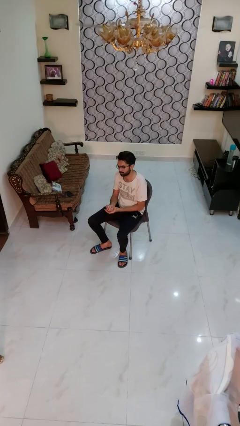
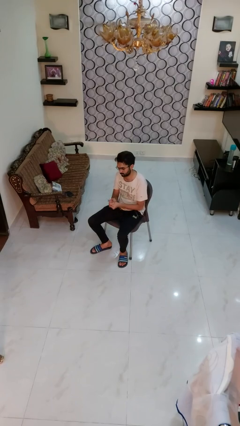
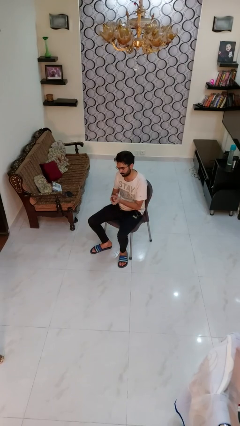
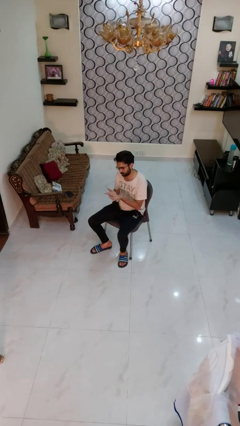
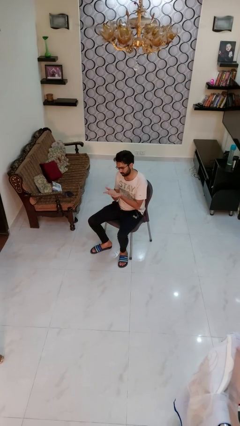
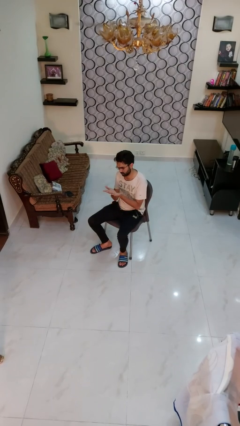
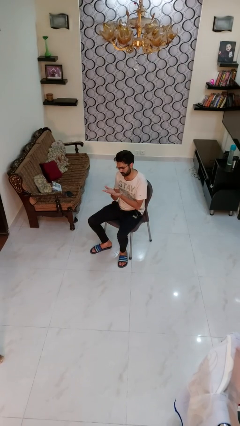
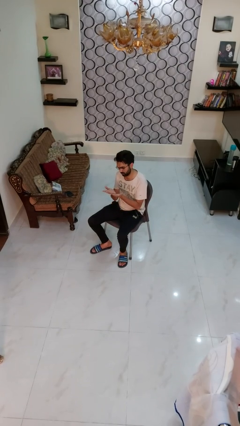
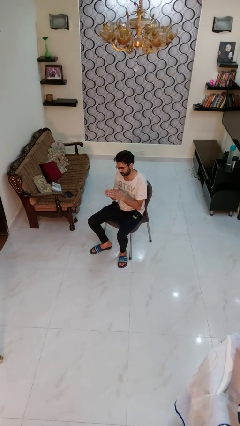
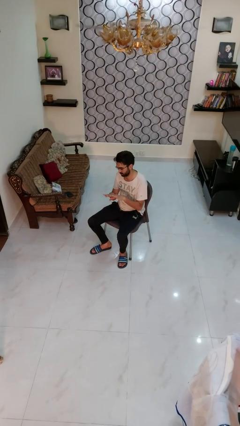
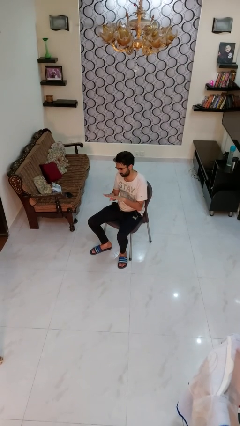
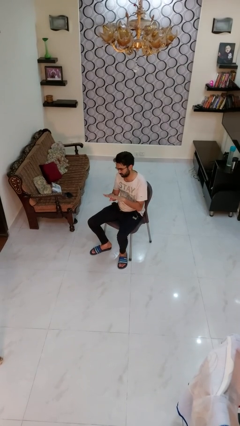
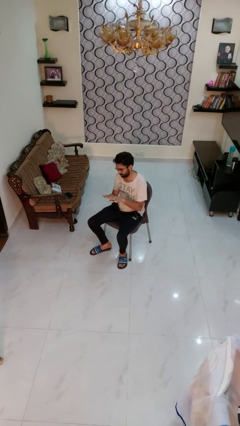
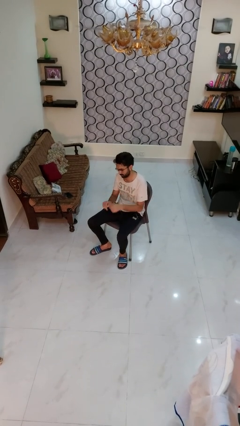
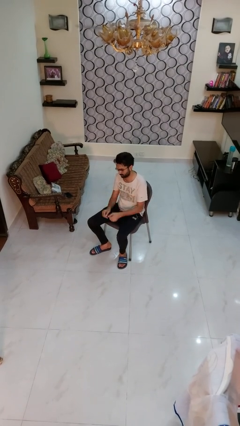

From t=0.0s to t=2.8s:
person looks at hands in lap

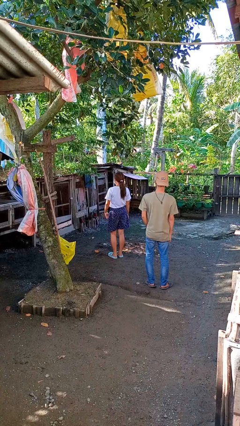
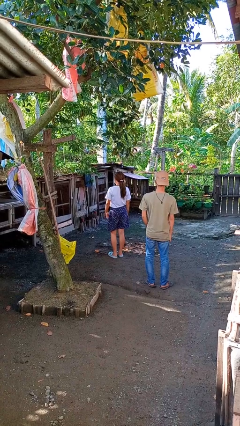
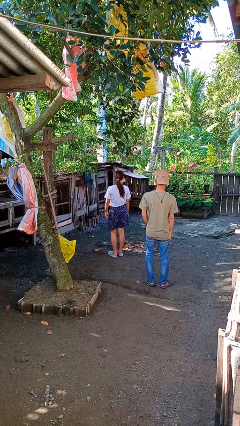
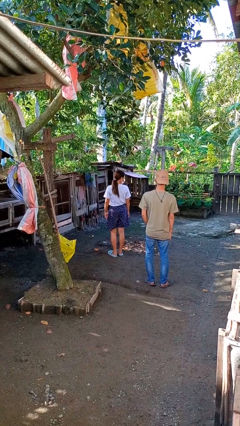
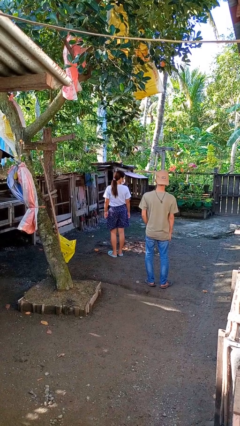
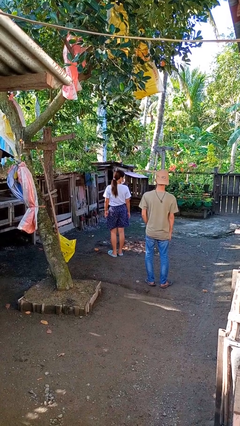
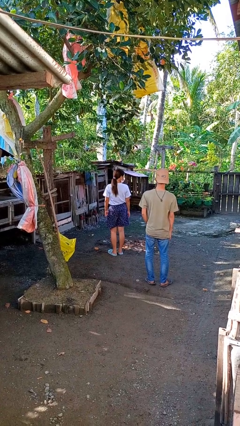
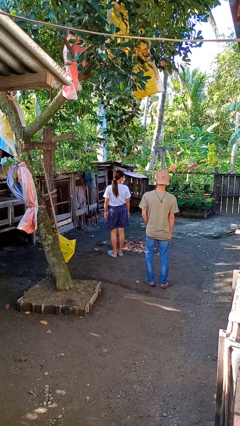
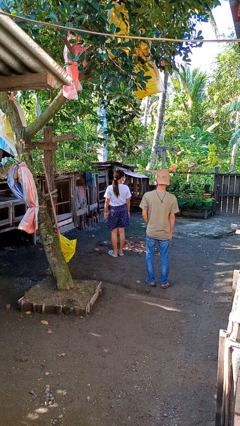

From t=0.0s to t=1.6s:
person looks over shoulder

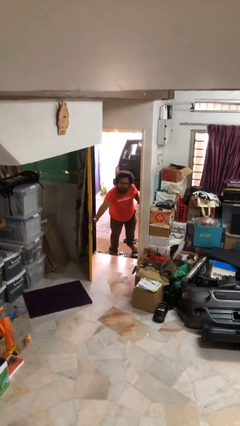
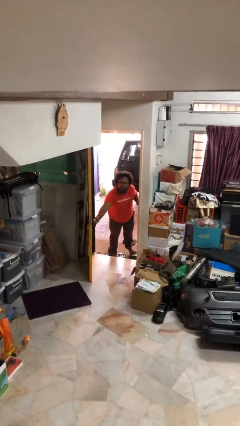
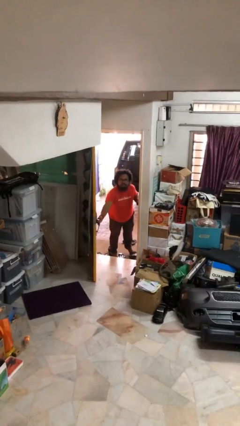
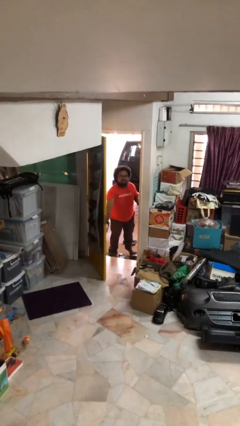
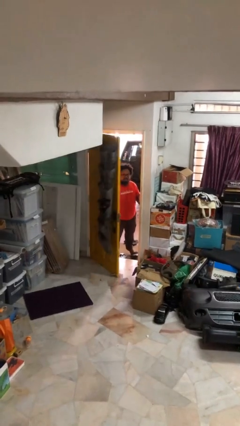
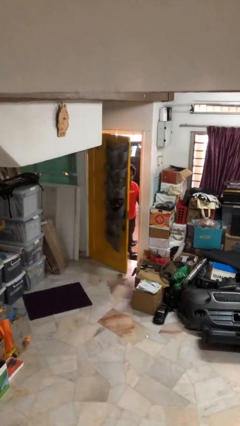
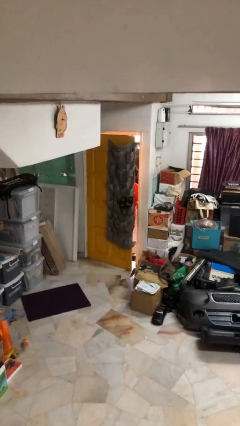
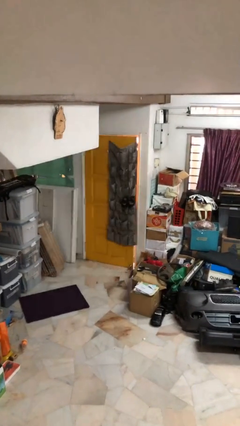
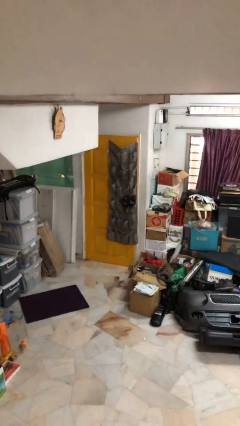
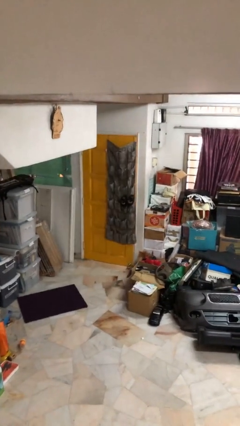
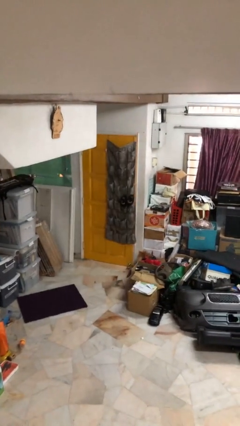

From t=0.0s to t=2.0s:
person closes facility door

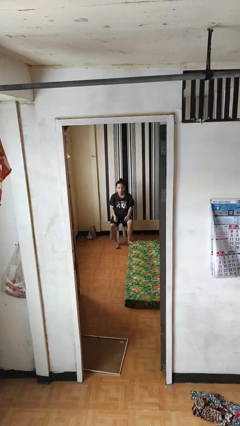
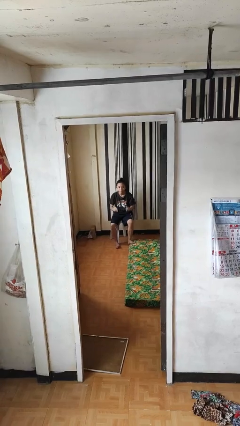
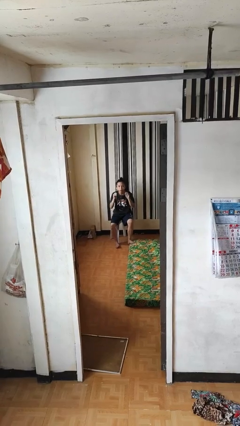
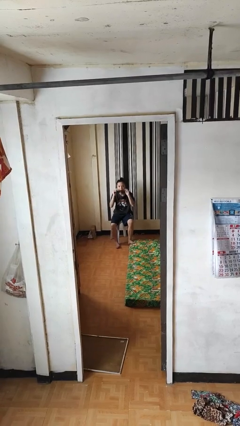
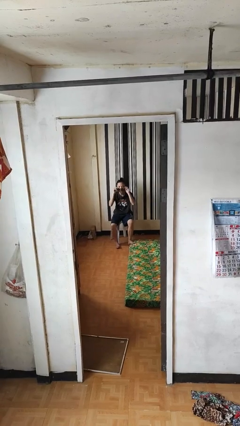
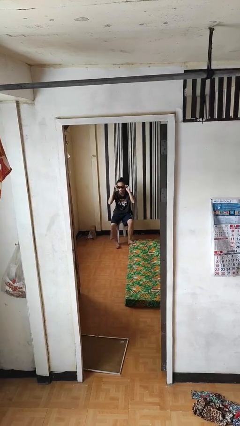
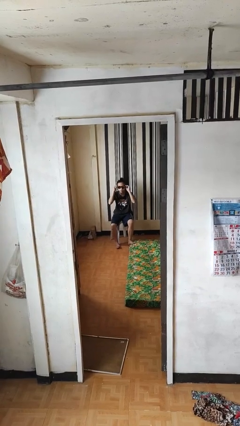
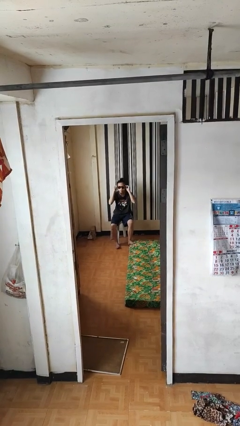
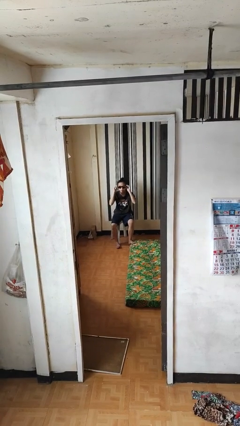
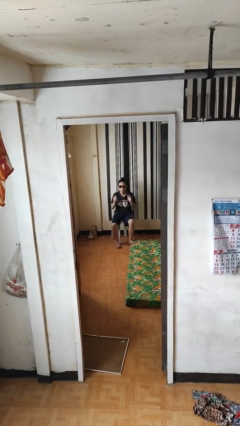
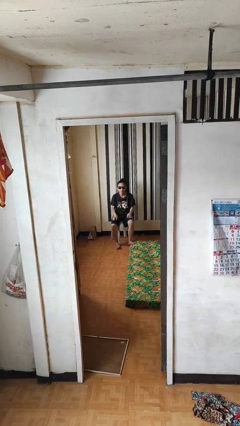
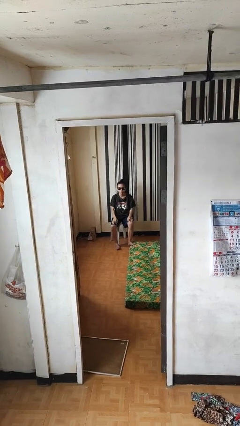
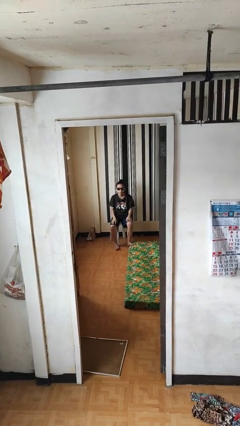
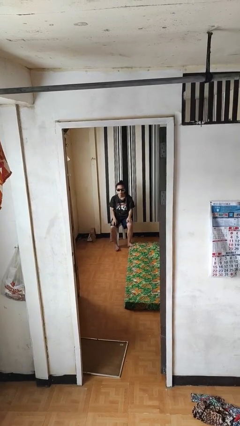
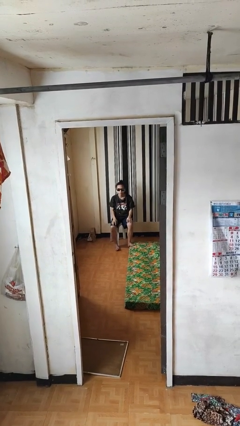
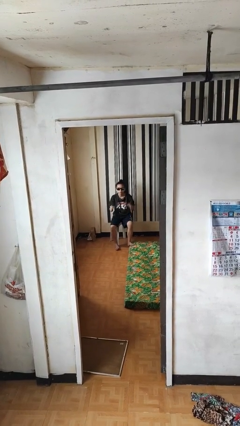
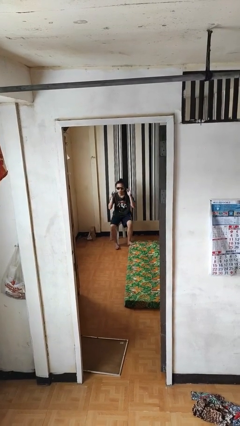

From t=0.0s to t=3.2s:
person puts on sunglasses

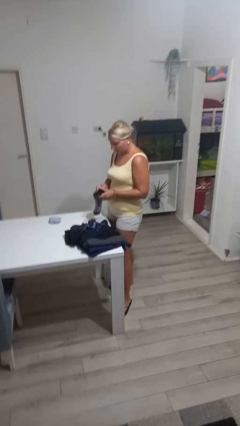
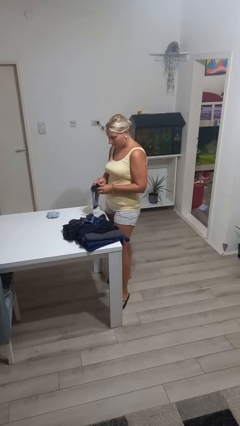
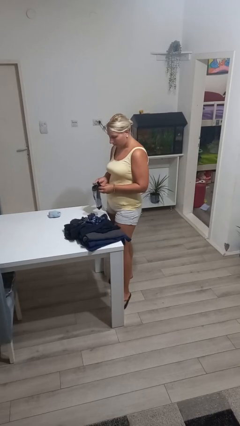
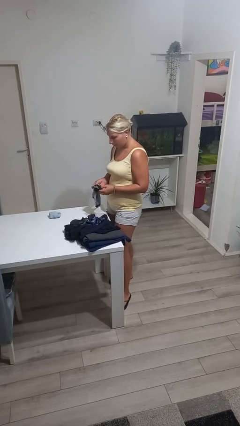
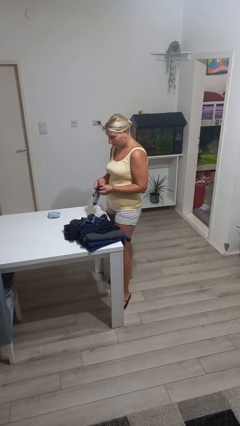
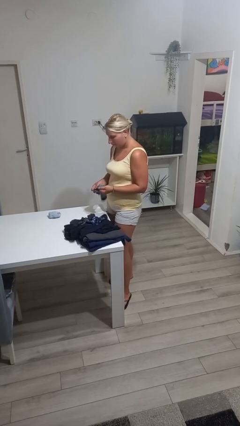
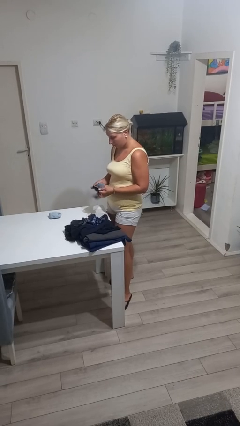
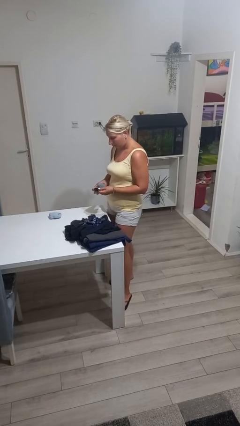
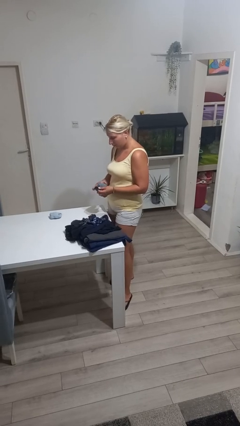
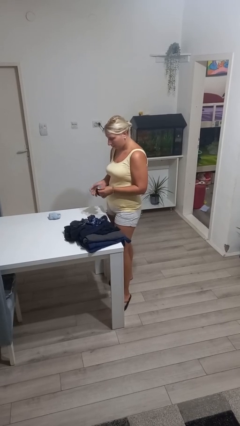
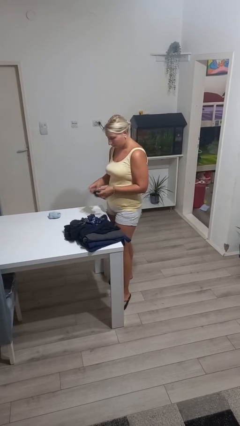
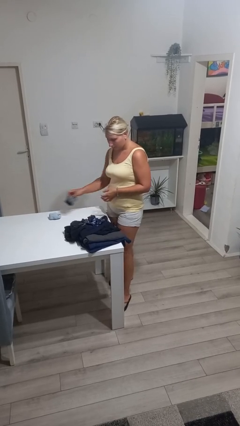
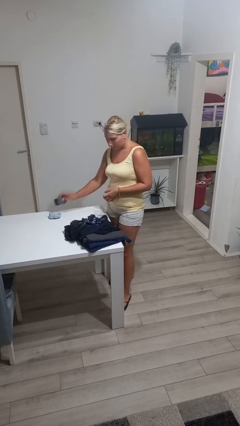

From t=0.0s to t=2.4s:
person folds socks

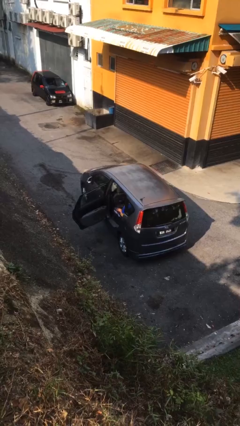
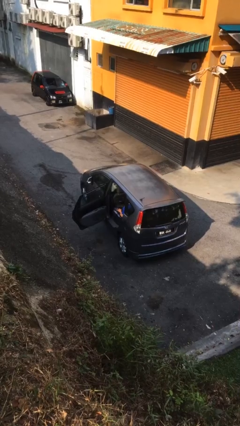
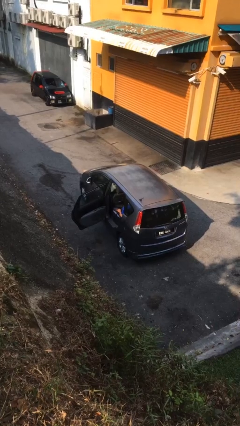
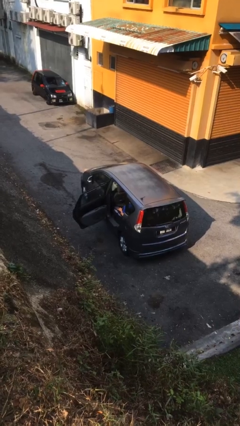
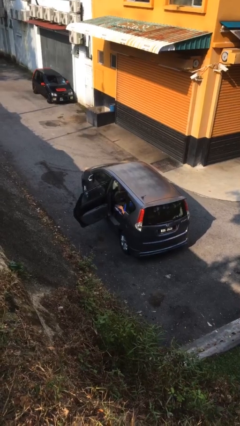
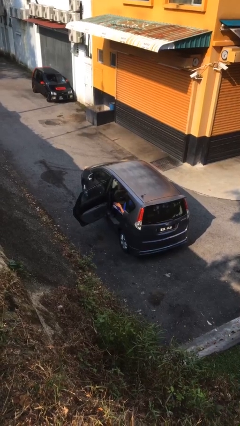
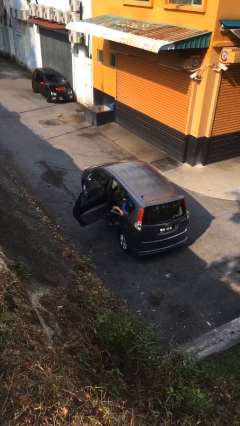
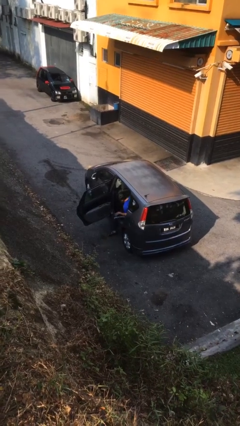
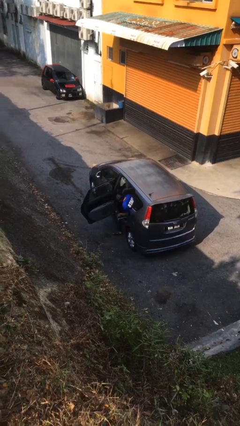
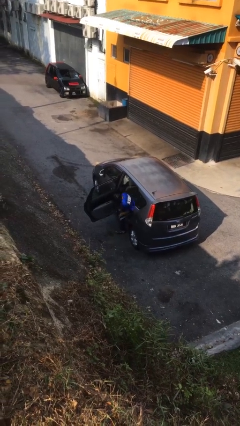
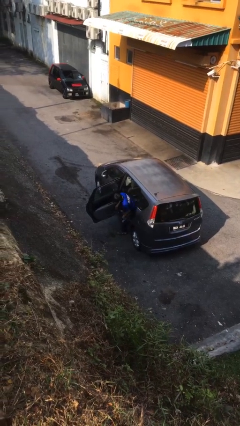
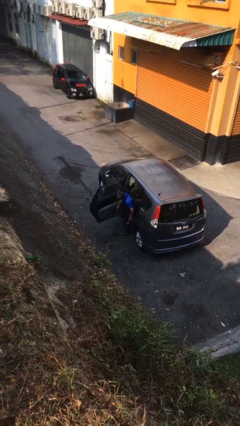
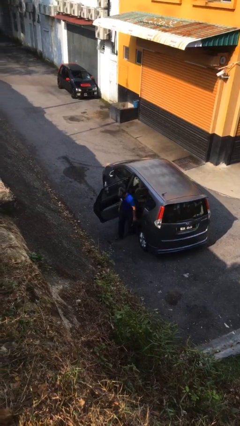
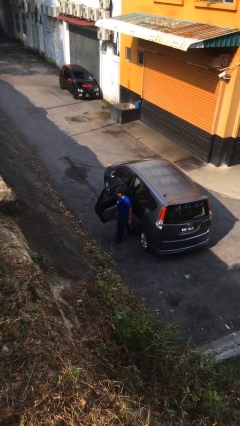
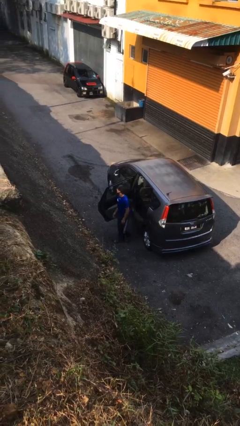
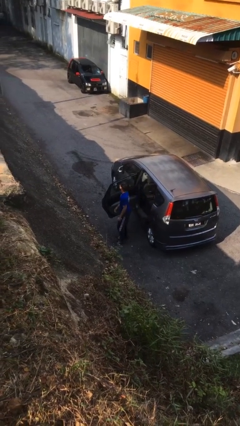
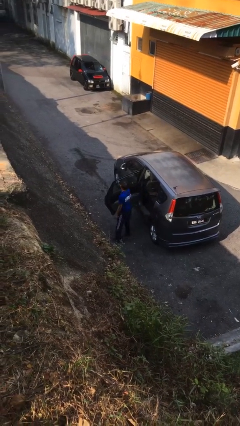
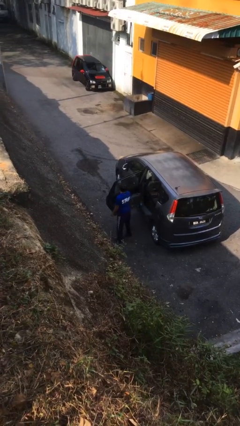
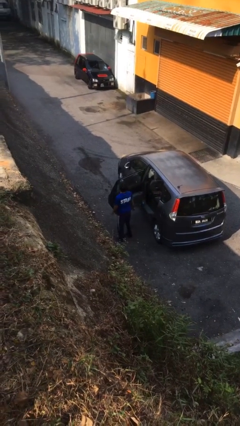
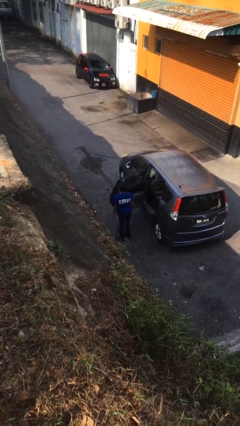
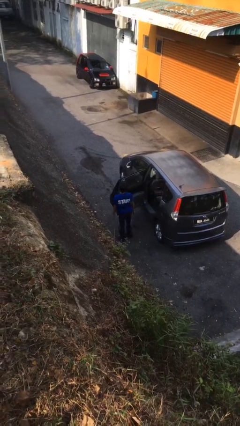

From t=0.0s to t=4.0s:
person exits car

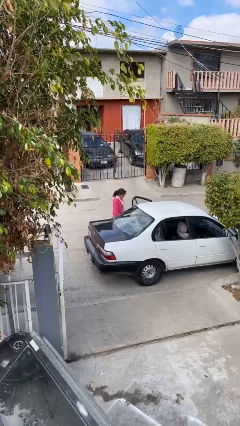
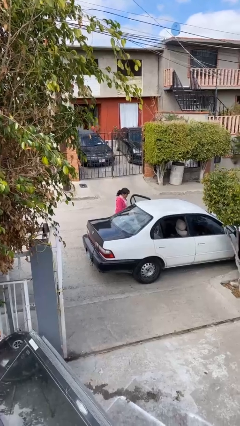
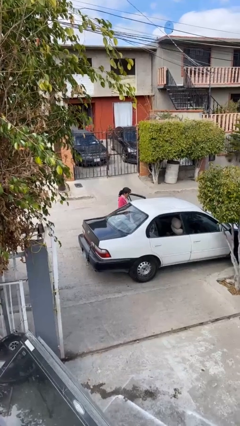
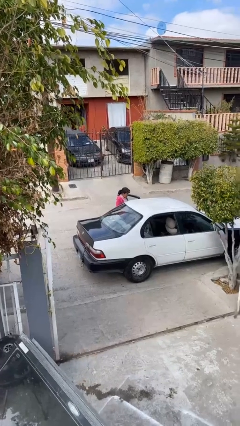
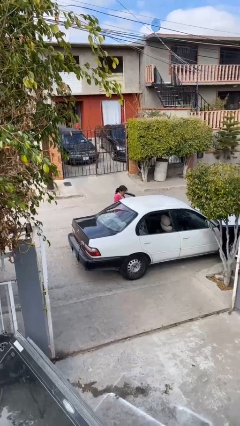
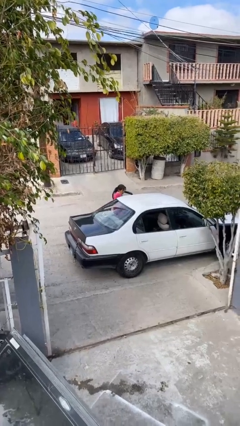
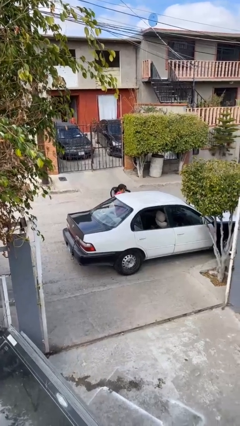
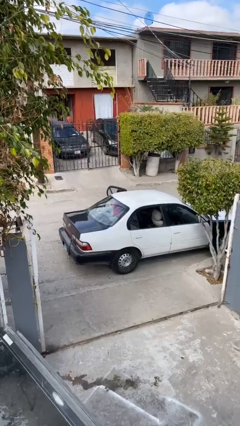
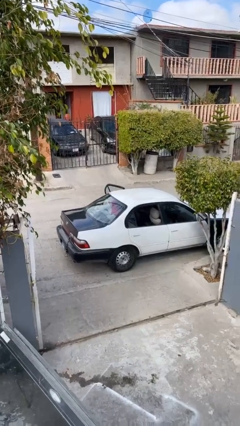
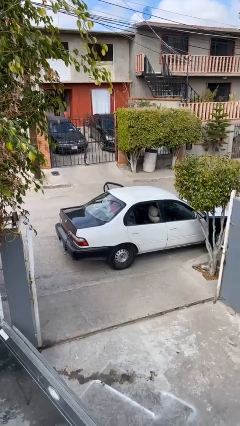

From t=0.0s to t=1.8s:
person enters car
